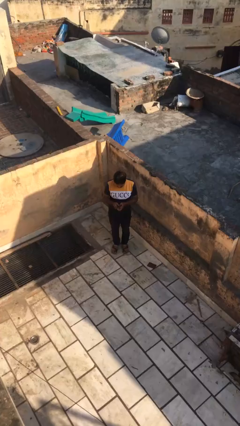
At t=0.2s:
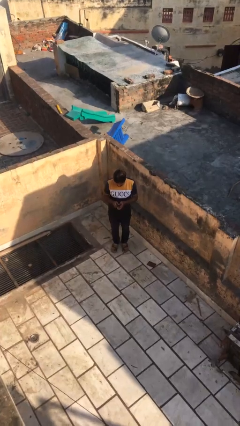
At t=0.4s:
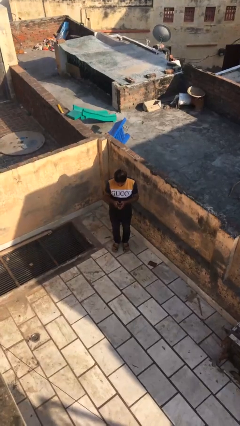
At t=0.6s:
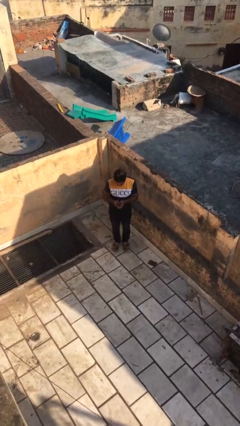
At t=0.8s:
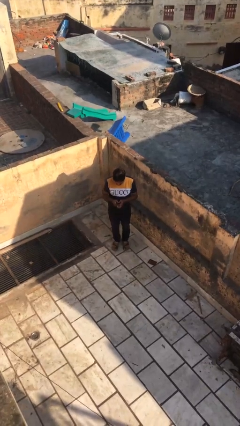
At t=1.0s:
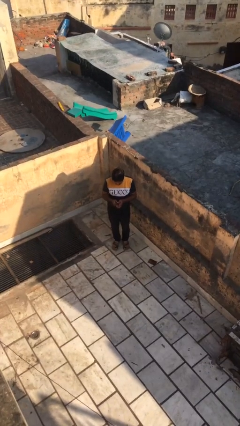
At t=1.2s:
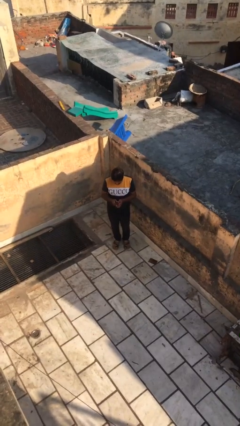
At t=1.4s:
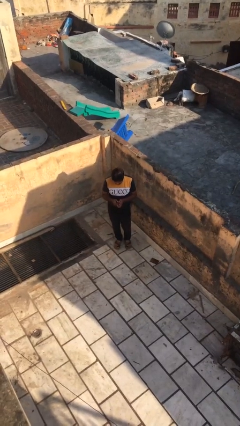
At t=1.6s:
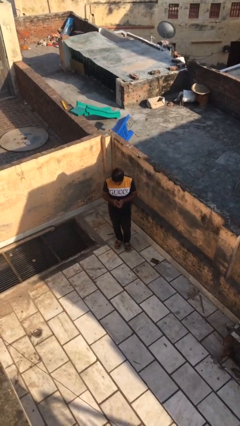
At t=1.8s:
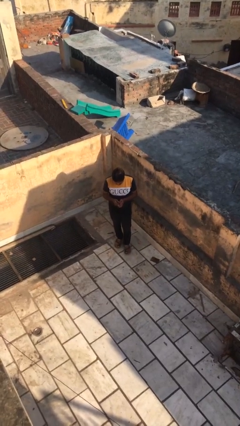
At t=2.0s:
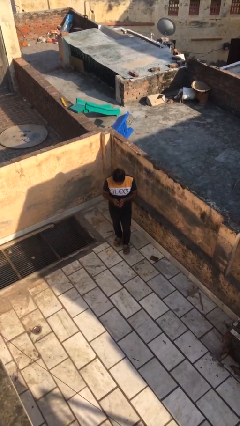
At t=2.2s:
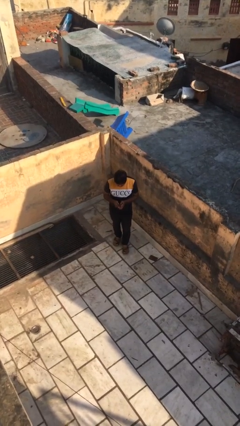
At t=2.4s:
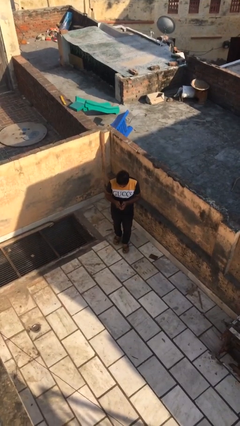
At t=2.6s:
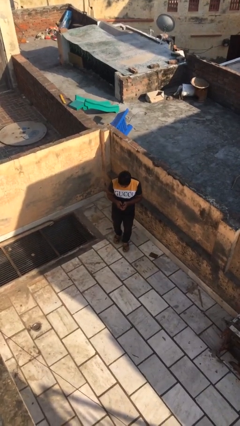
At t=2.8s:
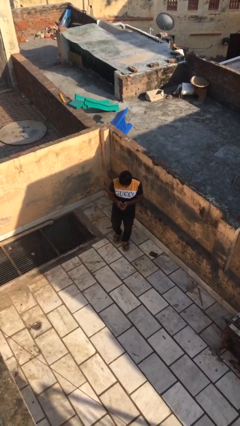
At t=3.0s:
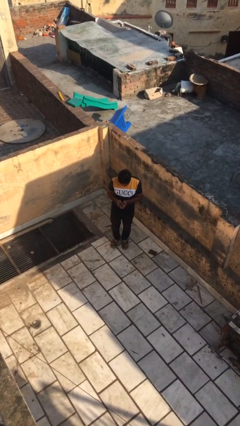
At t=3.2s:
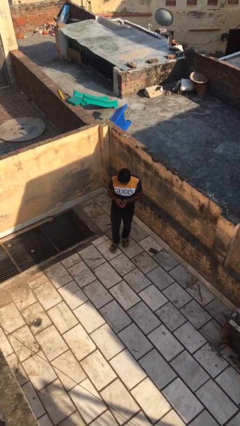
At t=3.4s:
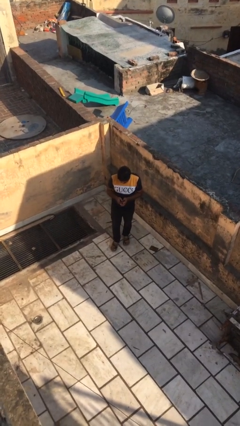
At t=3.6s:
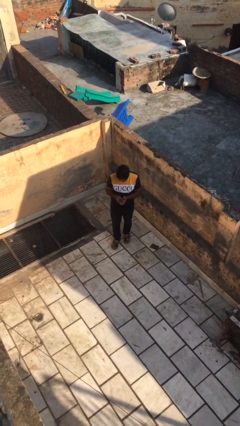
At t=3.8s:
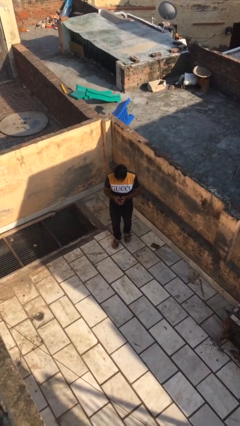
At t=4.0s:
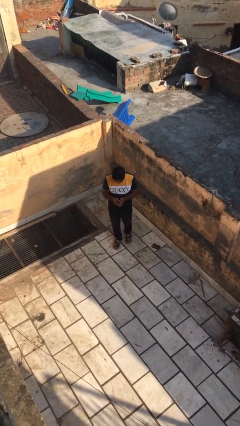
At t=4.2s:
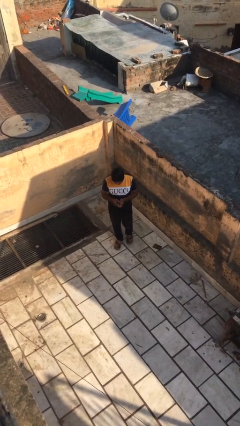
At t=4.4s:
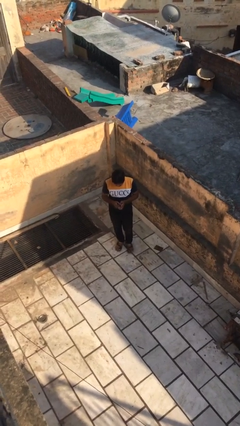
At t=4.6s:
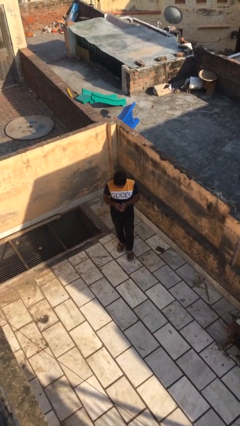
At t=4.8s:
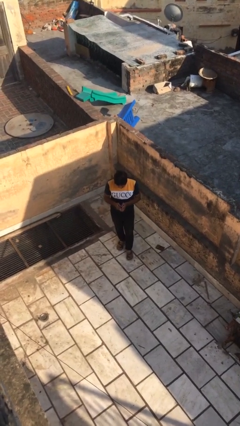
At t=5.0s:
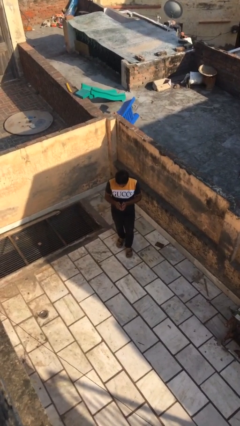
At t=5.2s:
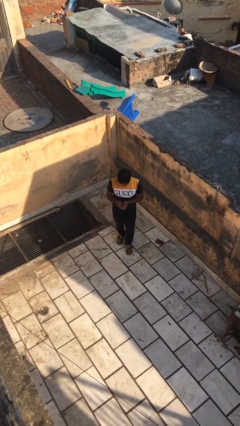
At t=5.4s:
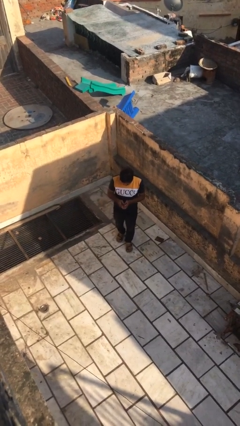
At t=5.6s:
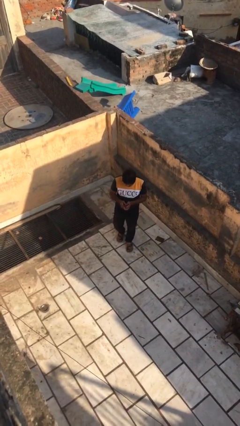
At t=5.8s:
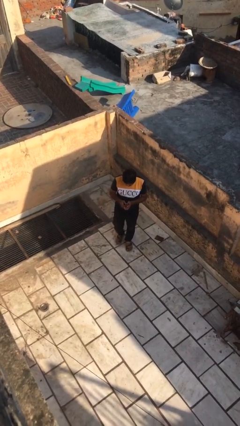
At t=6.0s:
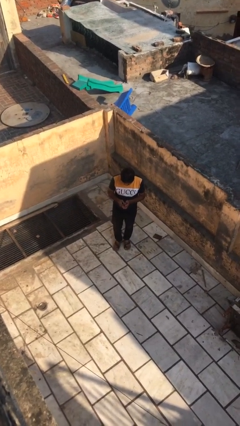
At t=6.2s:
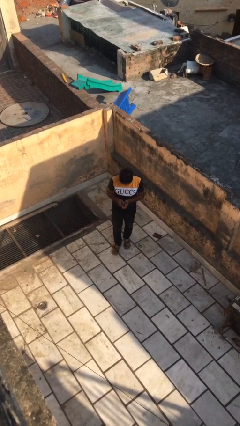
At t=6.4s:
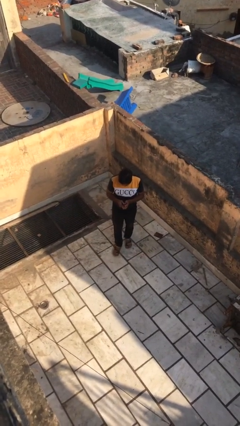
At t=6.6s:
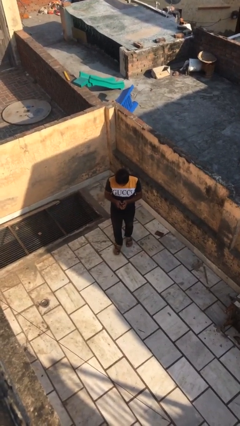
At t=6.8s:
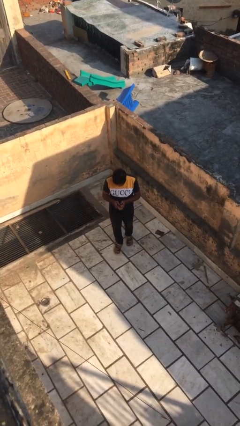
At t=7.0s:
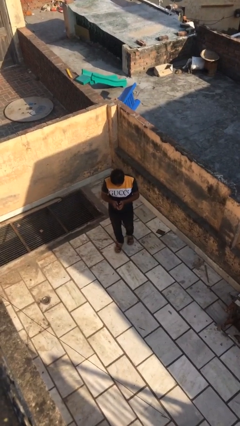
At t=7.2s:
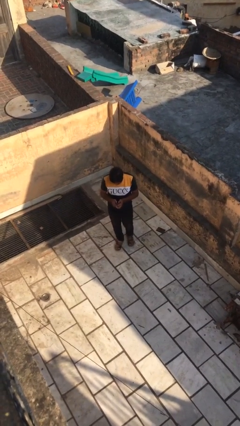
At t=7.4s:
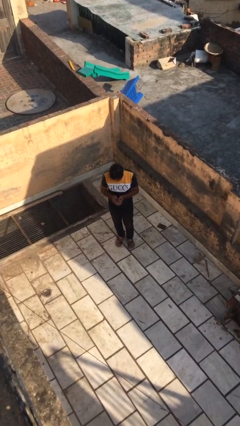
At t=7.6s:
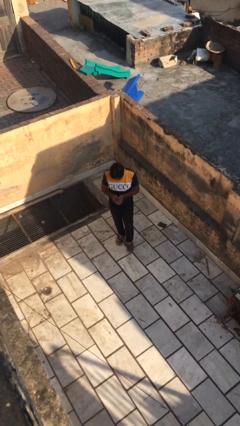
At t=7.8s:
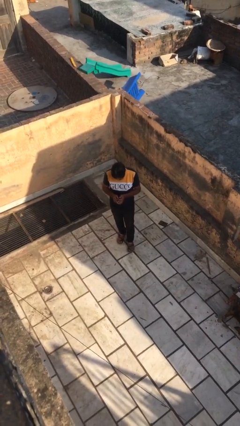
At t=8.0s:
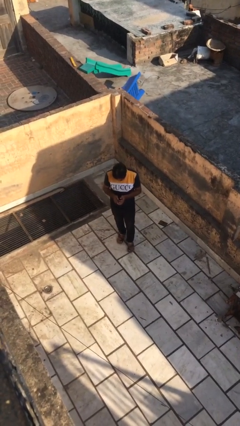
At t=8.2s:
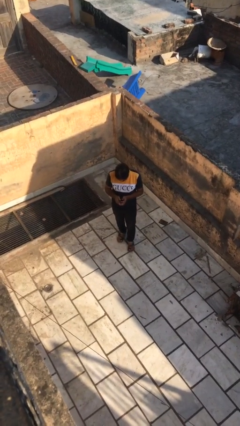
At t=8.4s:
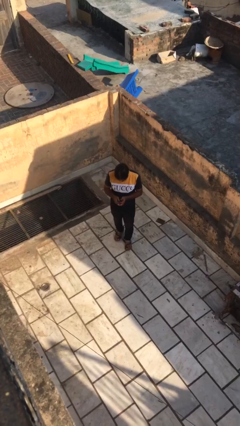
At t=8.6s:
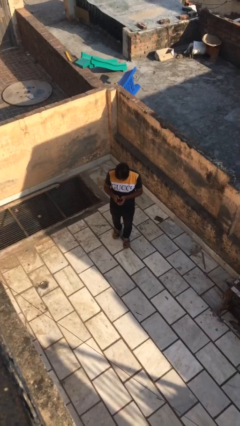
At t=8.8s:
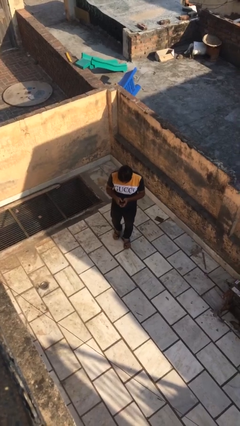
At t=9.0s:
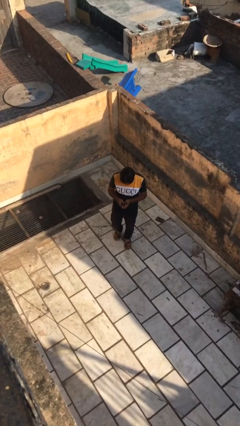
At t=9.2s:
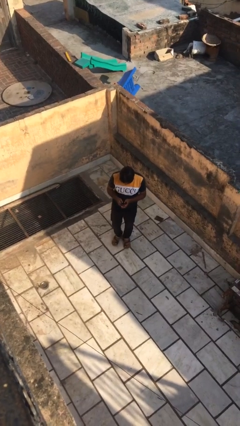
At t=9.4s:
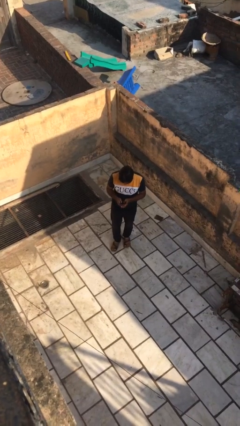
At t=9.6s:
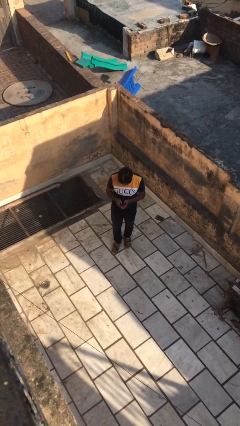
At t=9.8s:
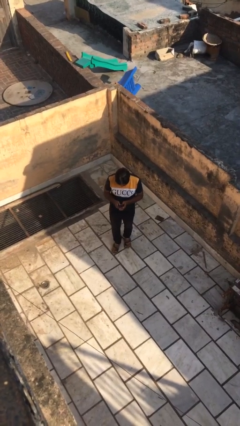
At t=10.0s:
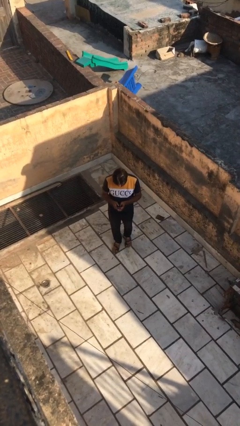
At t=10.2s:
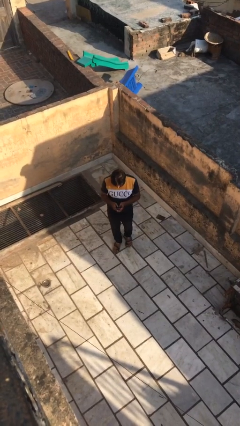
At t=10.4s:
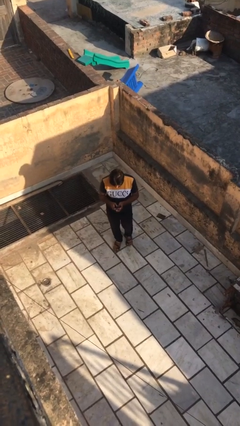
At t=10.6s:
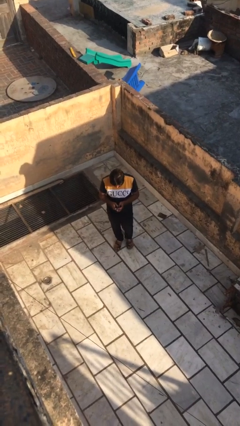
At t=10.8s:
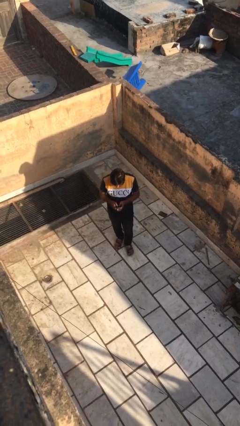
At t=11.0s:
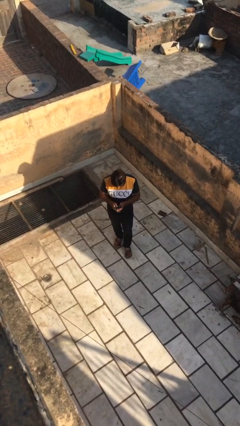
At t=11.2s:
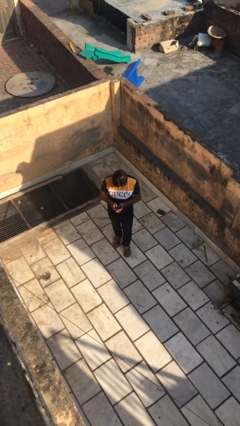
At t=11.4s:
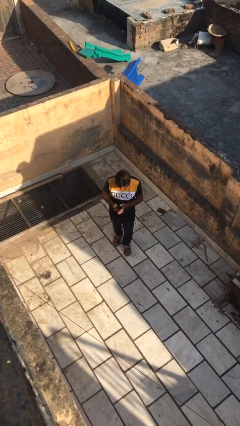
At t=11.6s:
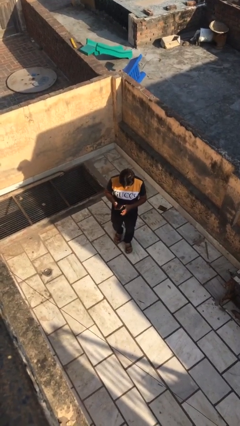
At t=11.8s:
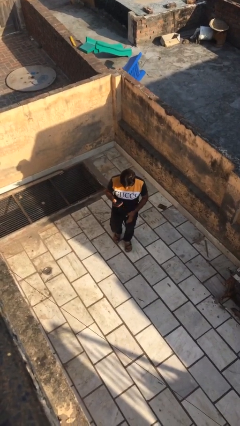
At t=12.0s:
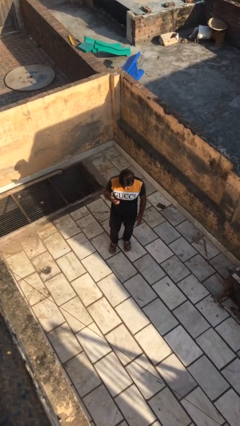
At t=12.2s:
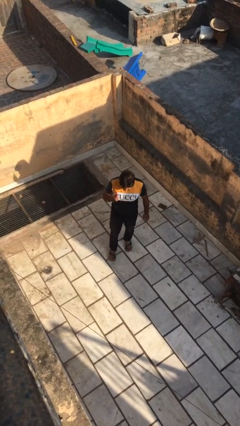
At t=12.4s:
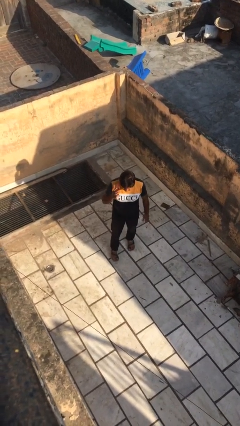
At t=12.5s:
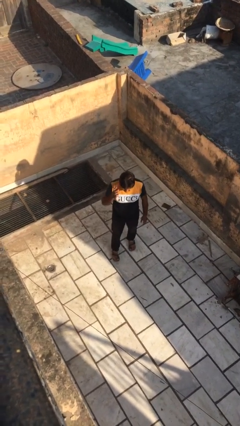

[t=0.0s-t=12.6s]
person texts on phone

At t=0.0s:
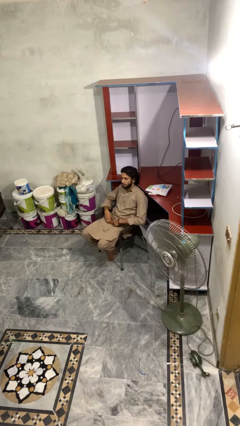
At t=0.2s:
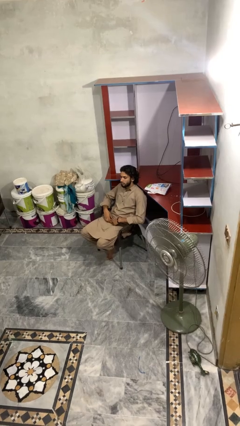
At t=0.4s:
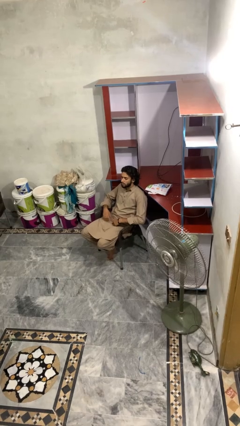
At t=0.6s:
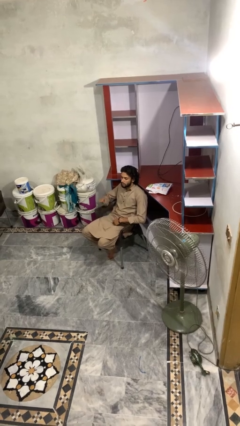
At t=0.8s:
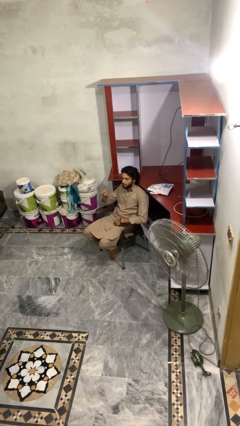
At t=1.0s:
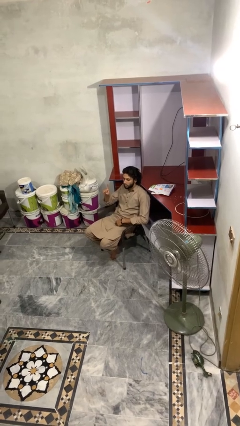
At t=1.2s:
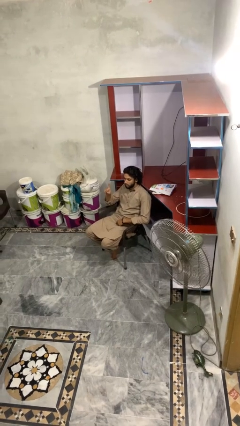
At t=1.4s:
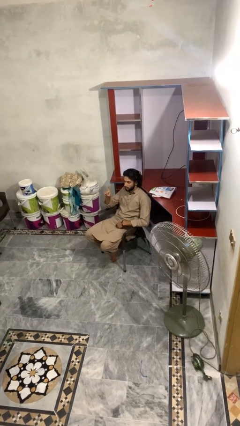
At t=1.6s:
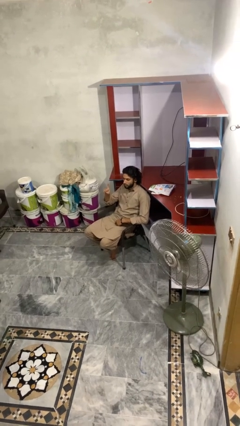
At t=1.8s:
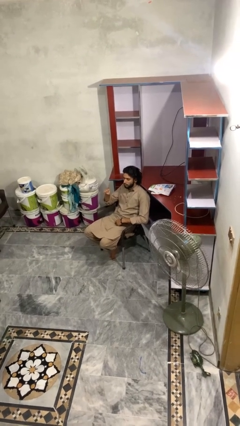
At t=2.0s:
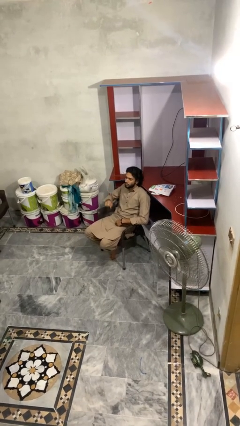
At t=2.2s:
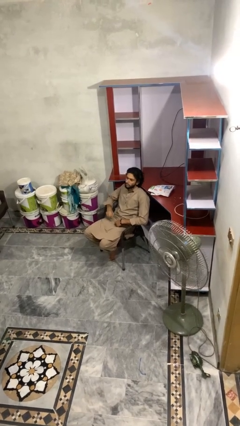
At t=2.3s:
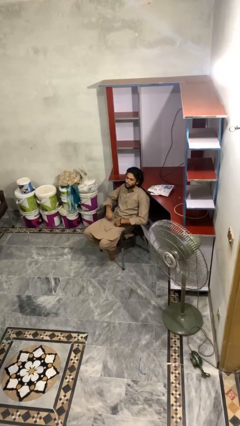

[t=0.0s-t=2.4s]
person gestures number one

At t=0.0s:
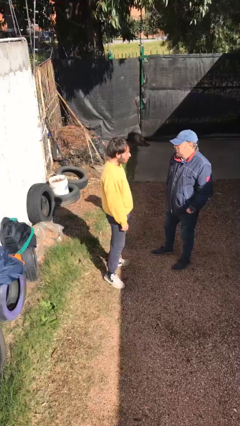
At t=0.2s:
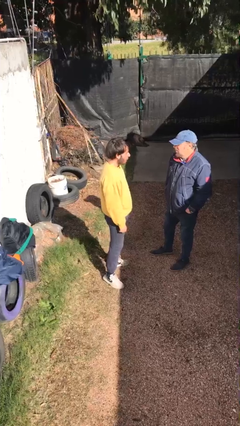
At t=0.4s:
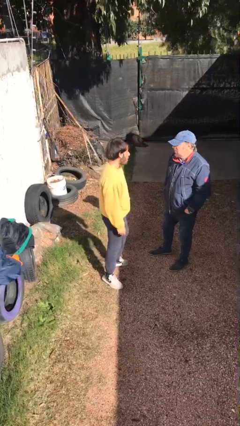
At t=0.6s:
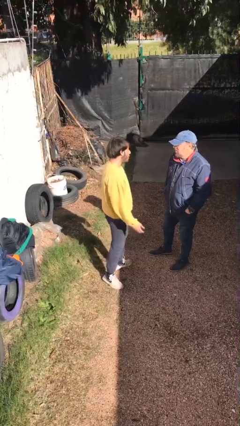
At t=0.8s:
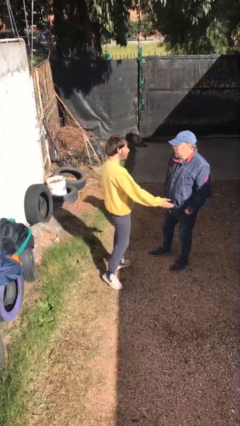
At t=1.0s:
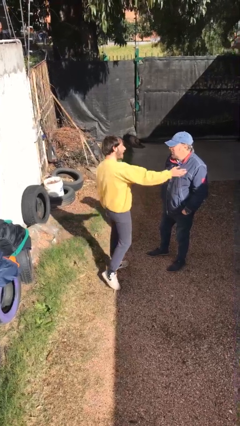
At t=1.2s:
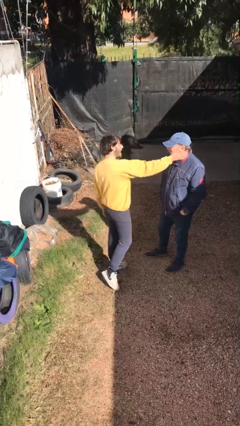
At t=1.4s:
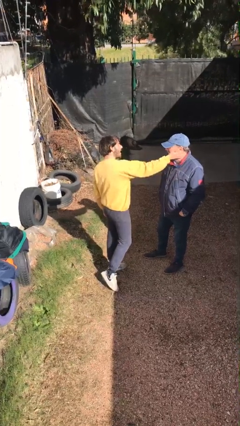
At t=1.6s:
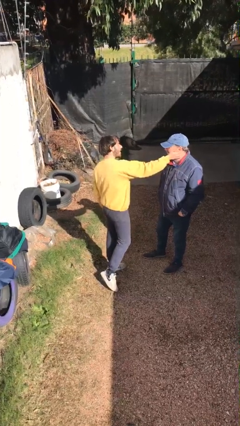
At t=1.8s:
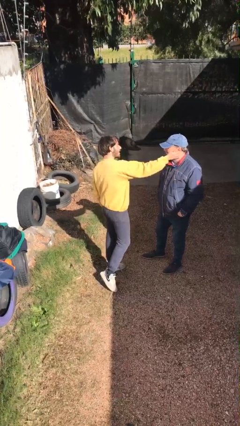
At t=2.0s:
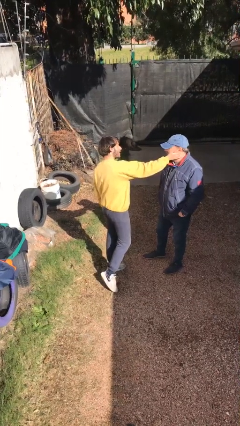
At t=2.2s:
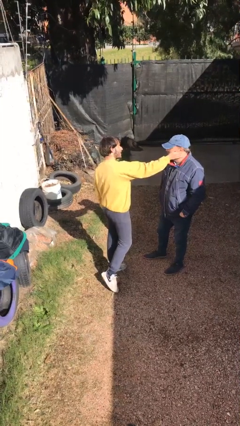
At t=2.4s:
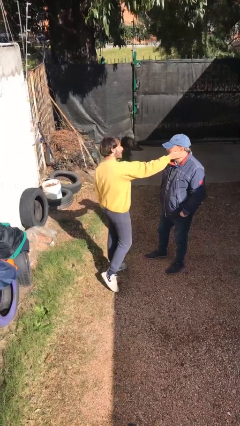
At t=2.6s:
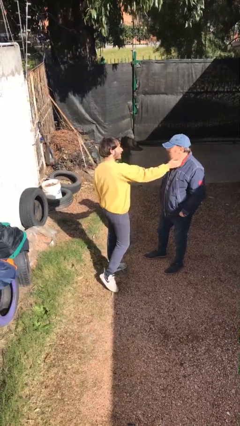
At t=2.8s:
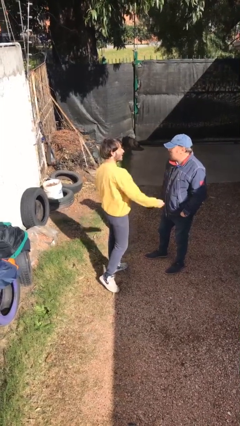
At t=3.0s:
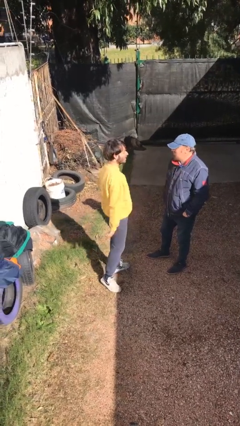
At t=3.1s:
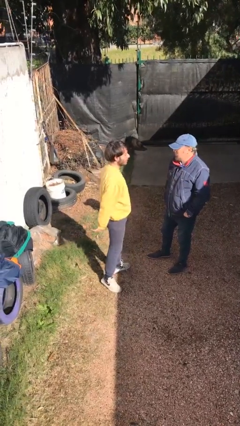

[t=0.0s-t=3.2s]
person touches face of person
